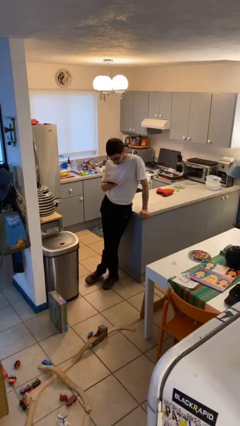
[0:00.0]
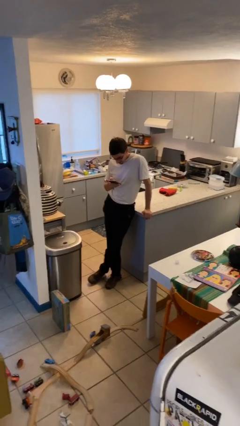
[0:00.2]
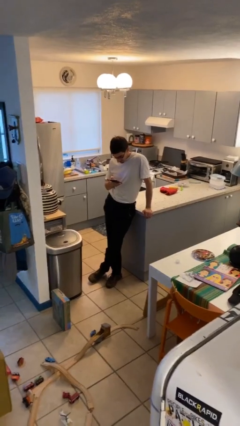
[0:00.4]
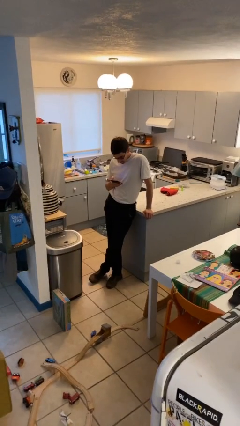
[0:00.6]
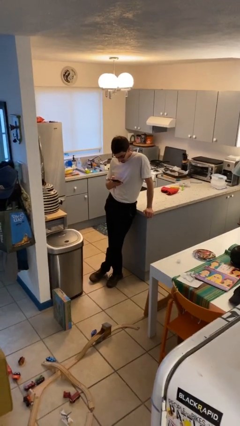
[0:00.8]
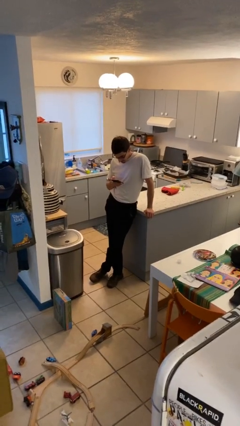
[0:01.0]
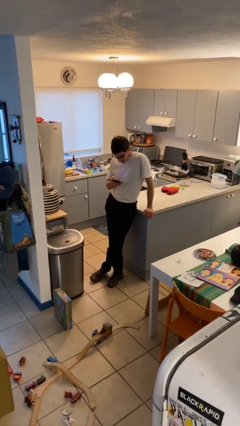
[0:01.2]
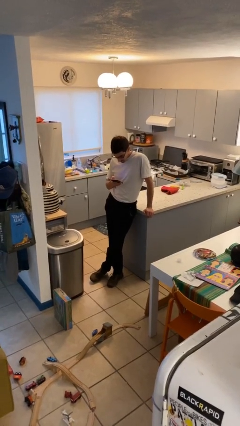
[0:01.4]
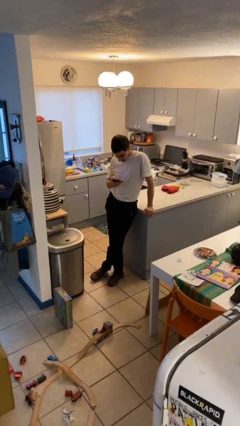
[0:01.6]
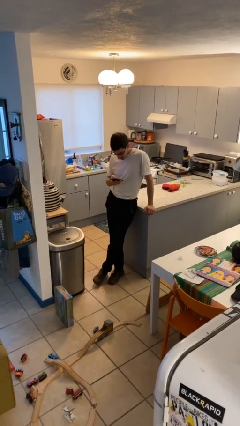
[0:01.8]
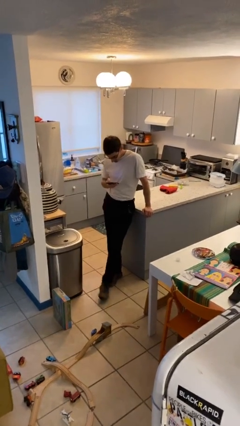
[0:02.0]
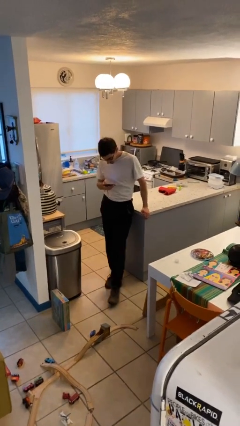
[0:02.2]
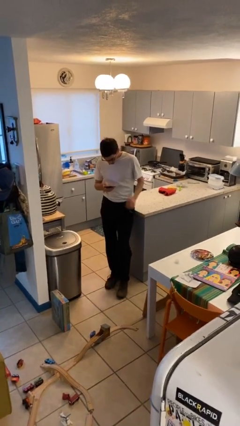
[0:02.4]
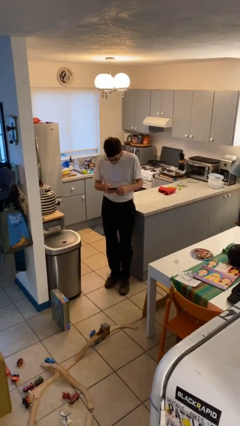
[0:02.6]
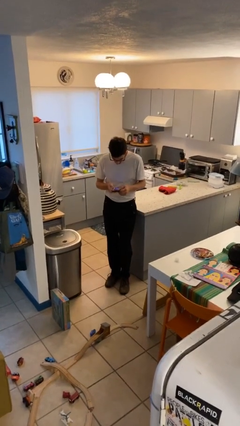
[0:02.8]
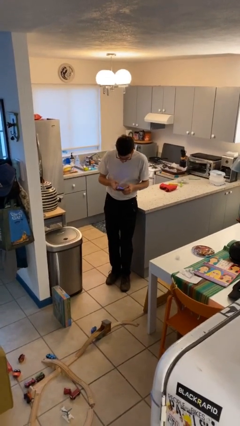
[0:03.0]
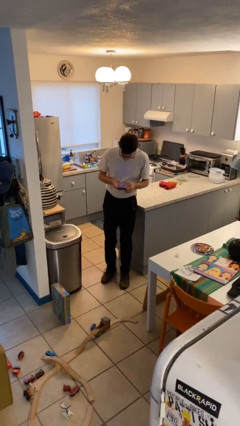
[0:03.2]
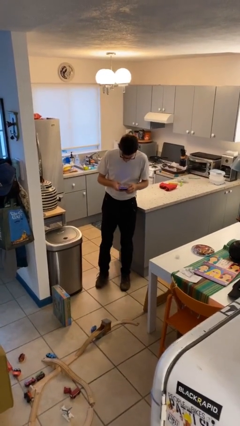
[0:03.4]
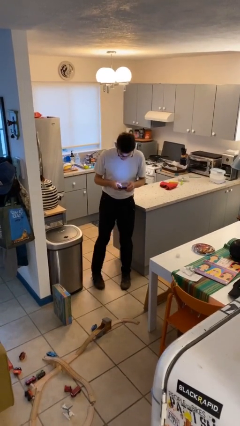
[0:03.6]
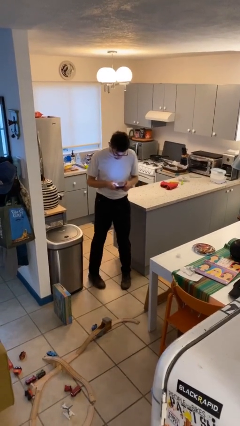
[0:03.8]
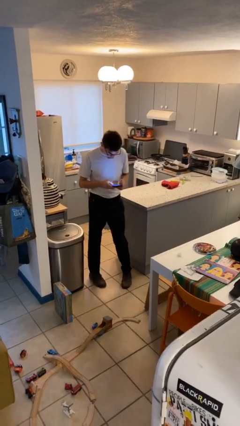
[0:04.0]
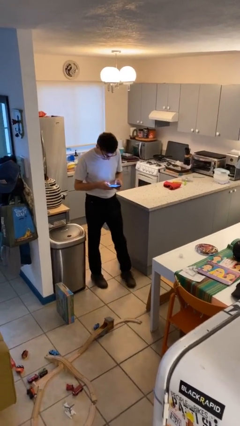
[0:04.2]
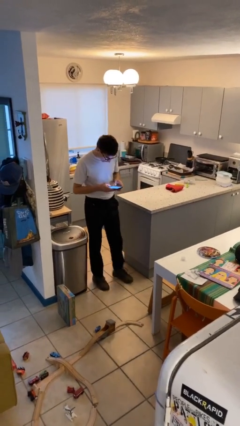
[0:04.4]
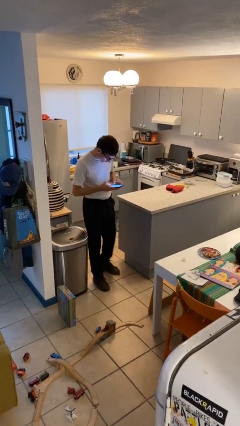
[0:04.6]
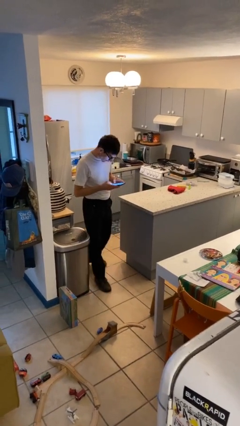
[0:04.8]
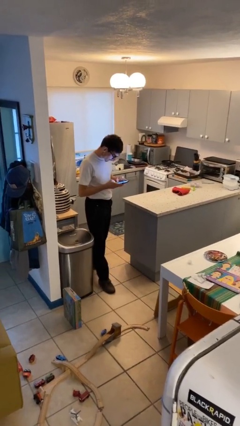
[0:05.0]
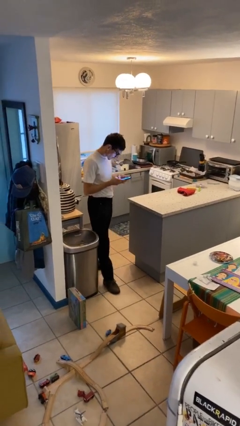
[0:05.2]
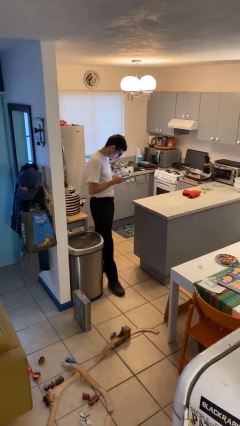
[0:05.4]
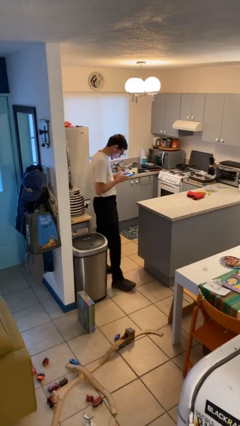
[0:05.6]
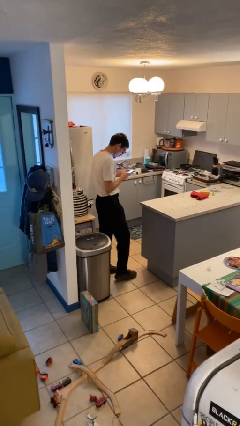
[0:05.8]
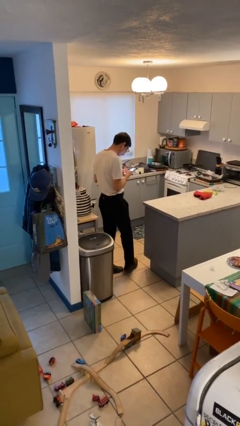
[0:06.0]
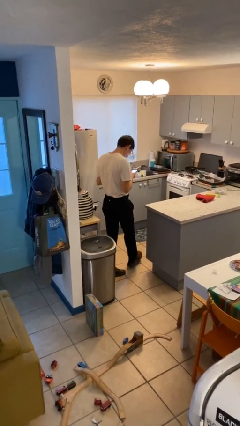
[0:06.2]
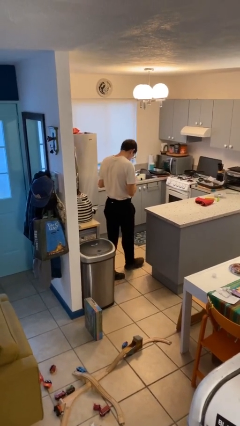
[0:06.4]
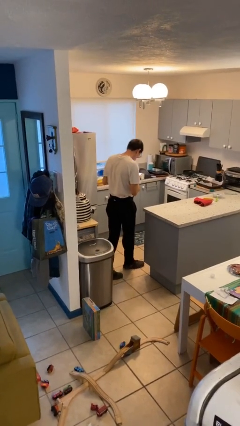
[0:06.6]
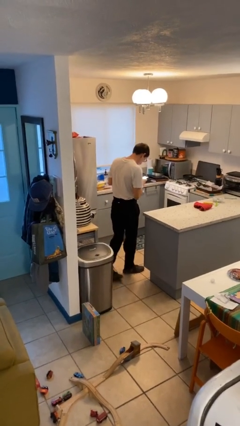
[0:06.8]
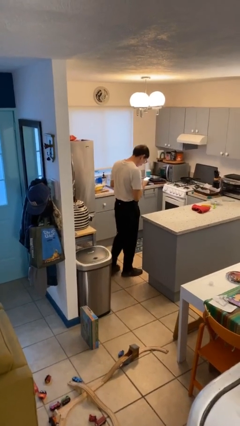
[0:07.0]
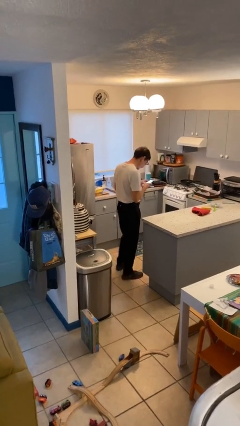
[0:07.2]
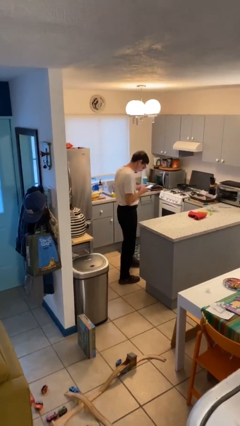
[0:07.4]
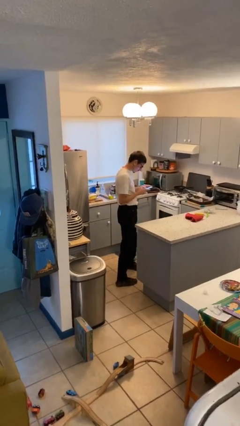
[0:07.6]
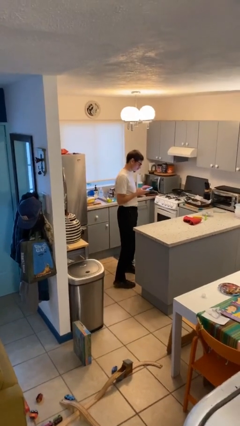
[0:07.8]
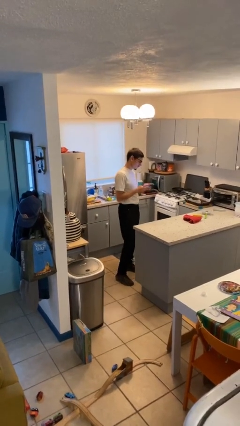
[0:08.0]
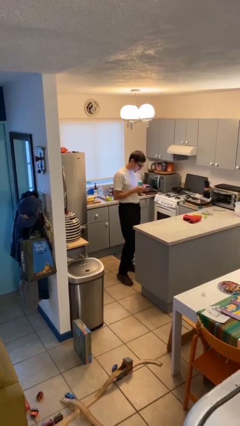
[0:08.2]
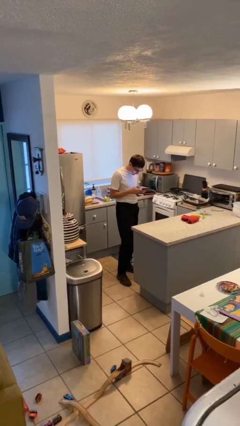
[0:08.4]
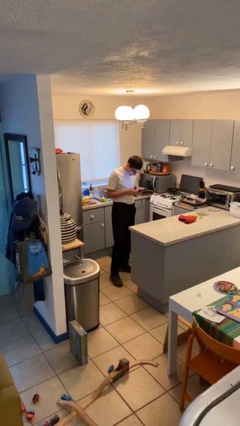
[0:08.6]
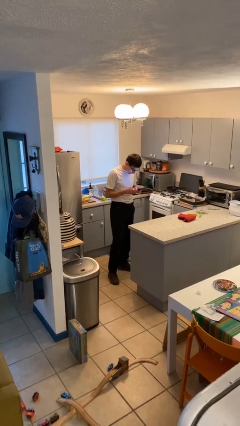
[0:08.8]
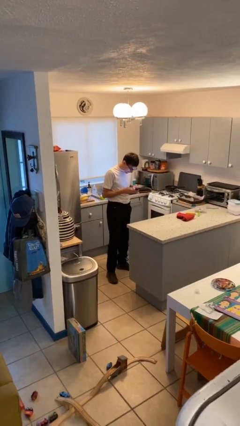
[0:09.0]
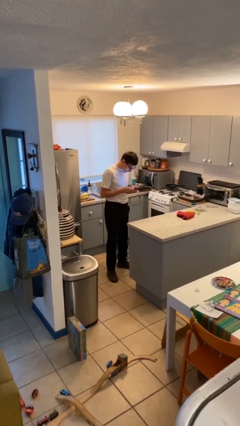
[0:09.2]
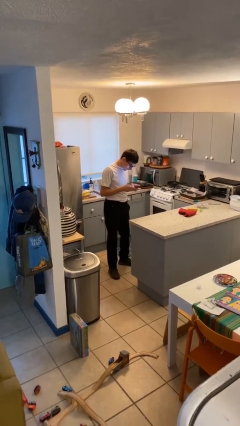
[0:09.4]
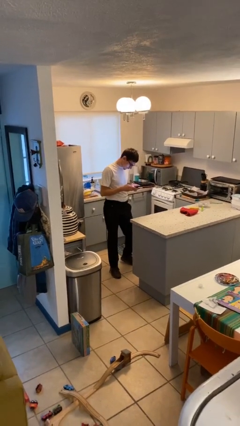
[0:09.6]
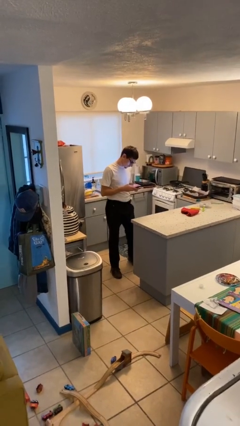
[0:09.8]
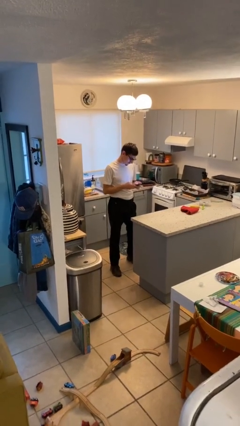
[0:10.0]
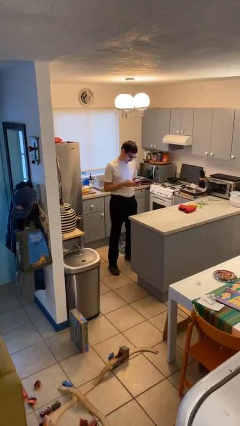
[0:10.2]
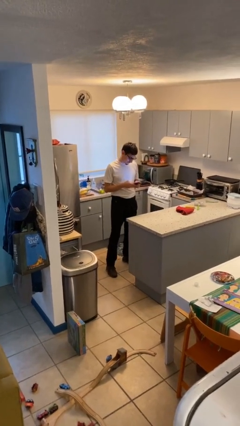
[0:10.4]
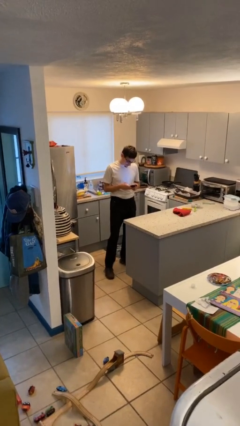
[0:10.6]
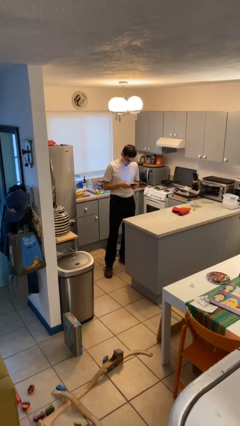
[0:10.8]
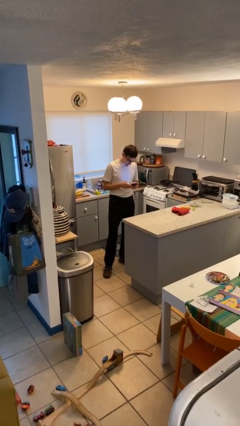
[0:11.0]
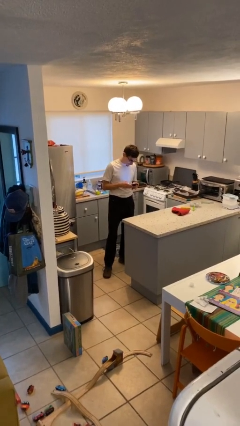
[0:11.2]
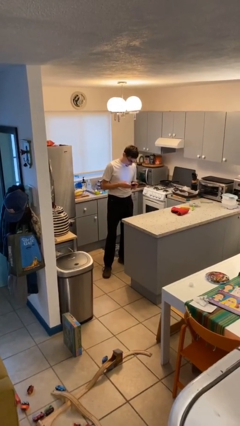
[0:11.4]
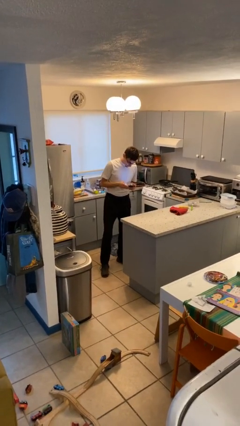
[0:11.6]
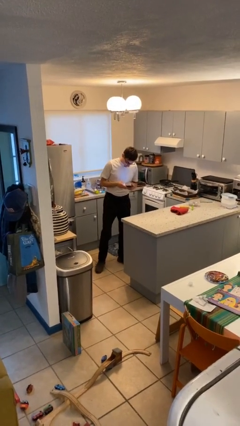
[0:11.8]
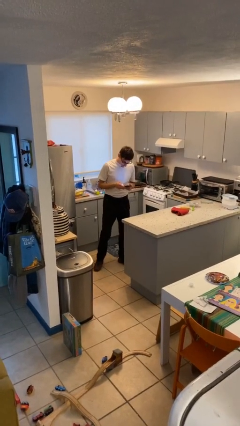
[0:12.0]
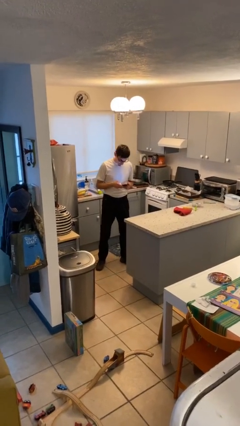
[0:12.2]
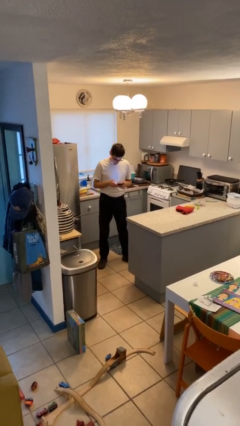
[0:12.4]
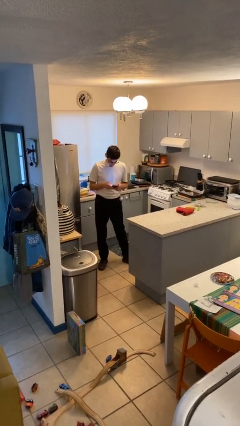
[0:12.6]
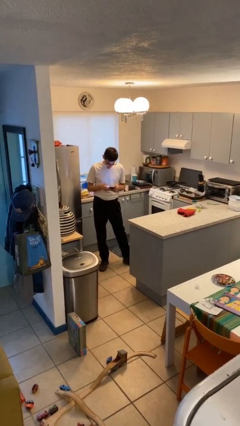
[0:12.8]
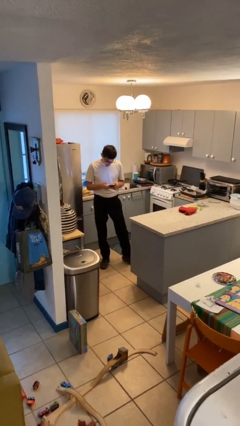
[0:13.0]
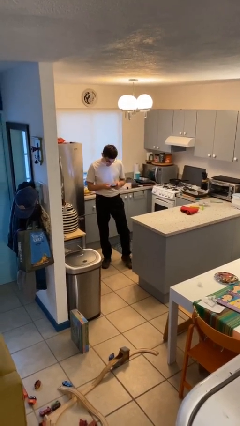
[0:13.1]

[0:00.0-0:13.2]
person texts on phone

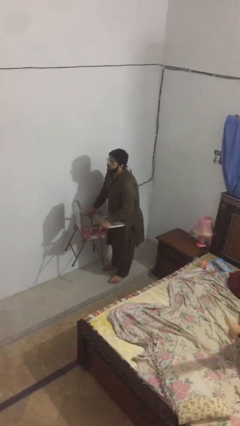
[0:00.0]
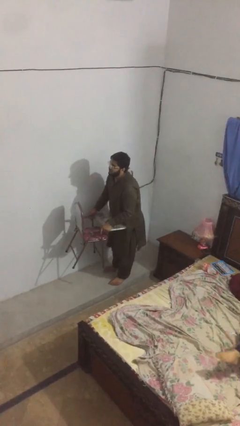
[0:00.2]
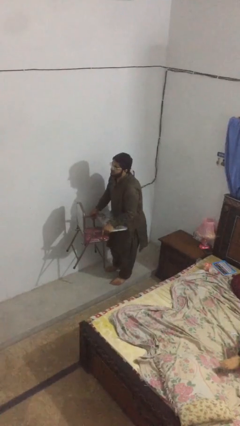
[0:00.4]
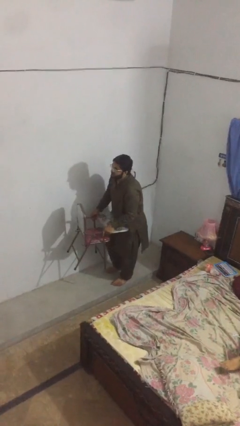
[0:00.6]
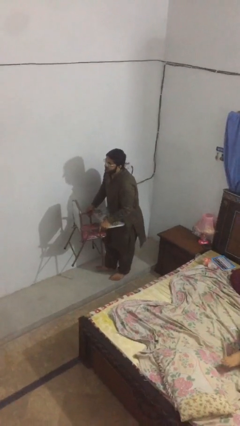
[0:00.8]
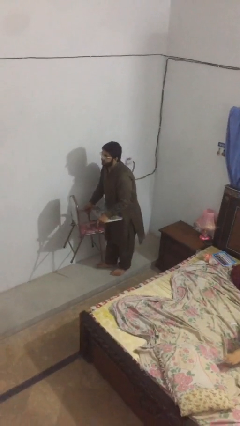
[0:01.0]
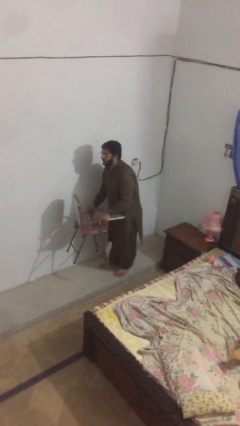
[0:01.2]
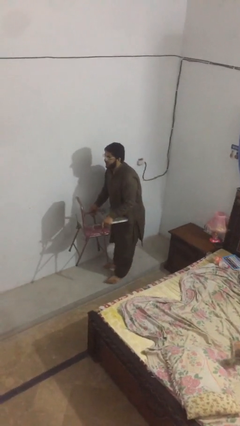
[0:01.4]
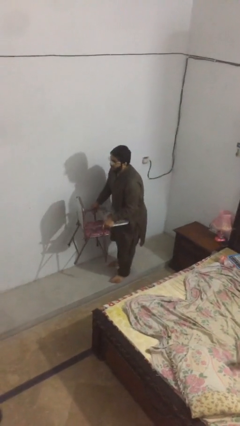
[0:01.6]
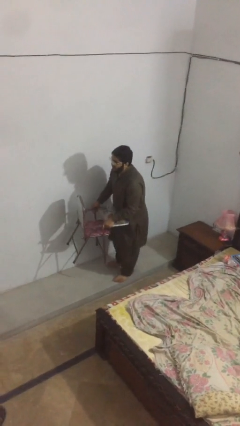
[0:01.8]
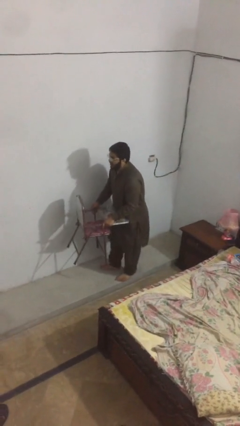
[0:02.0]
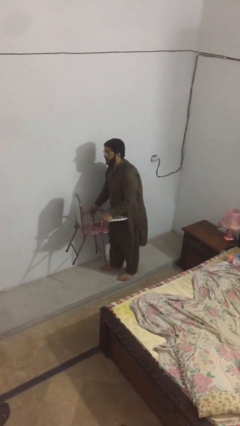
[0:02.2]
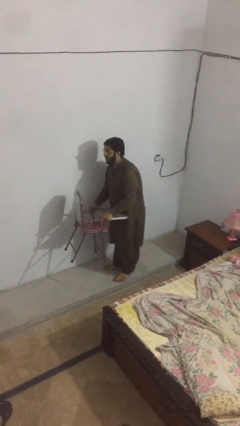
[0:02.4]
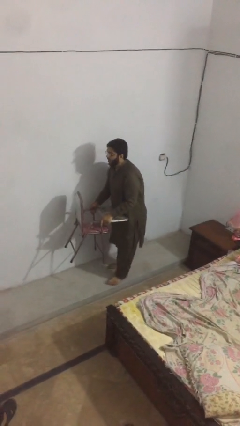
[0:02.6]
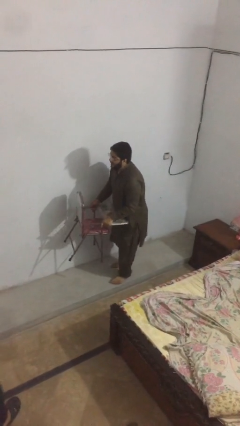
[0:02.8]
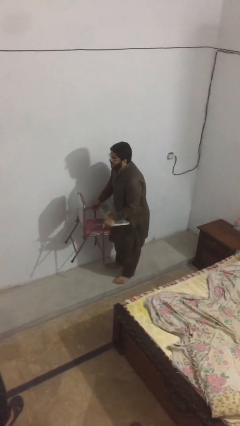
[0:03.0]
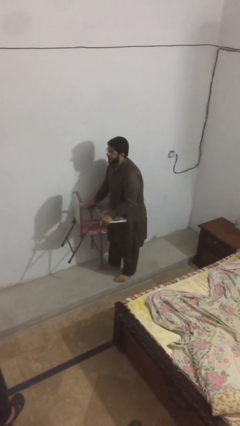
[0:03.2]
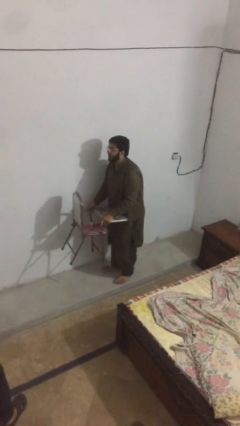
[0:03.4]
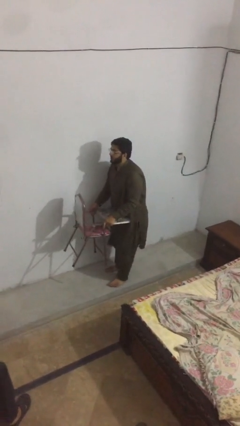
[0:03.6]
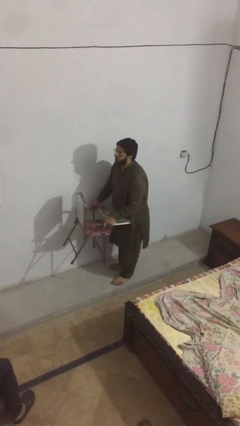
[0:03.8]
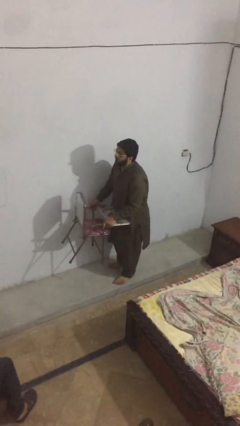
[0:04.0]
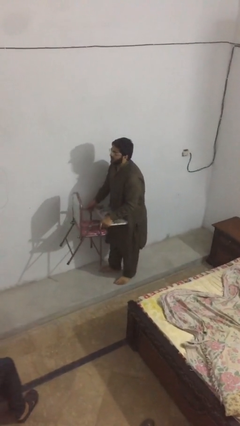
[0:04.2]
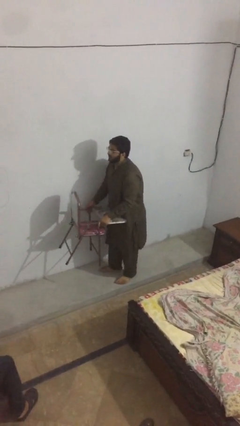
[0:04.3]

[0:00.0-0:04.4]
person carries heavy object

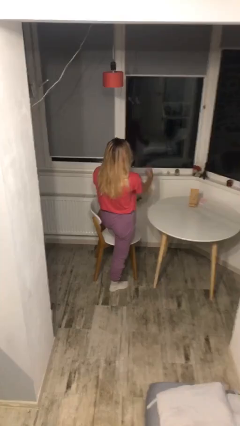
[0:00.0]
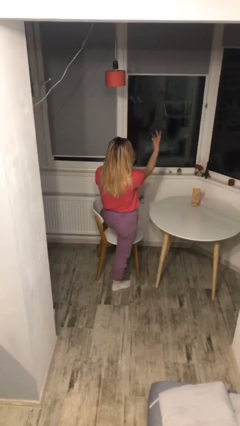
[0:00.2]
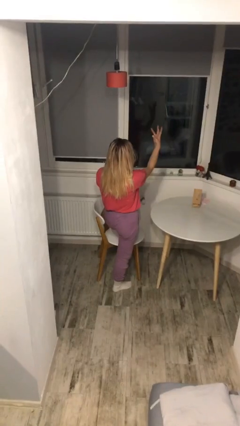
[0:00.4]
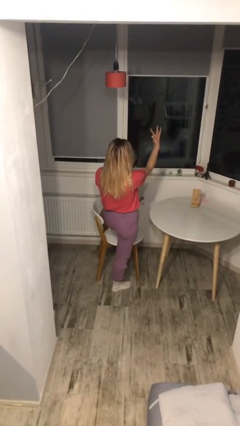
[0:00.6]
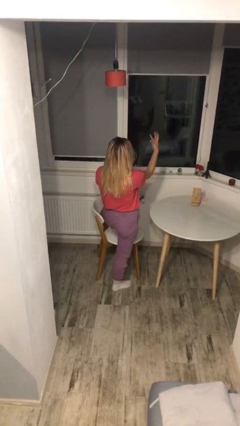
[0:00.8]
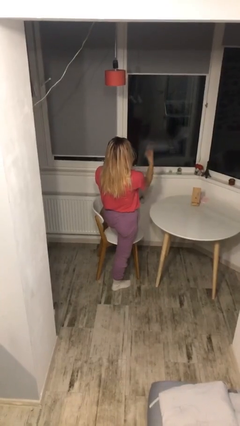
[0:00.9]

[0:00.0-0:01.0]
person gestures number three
